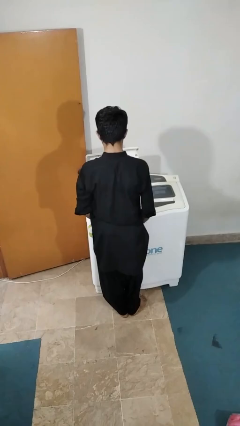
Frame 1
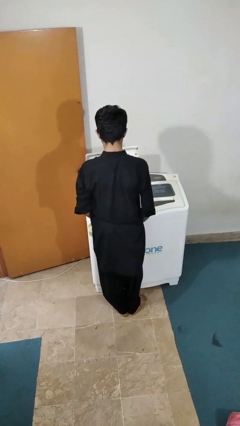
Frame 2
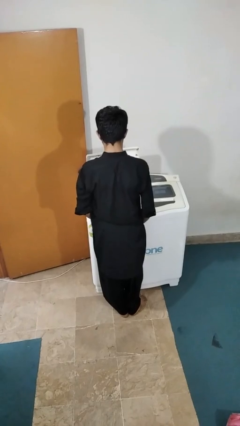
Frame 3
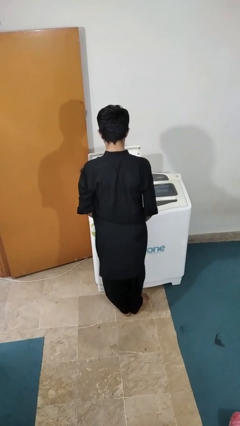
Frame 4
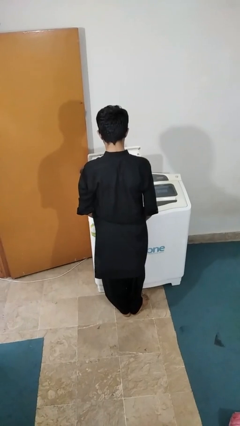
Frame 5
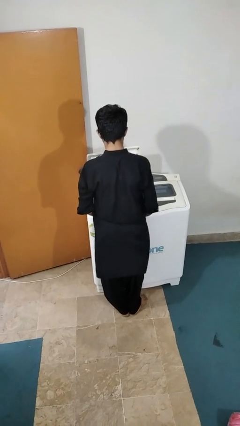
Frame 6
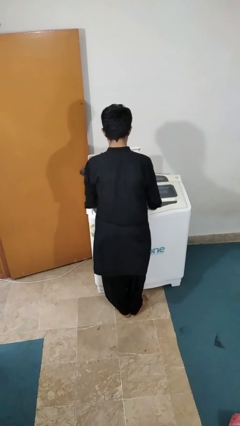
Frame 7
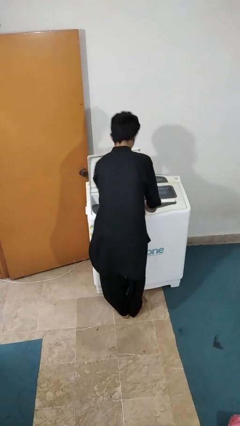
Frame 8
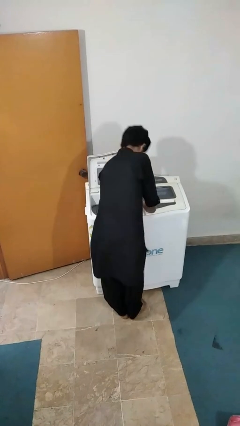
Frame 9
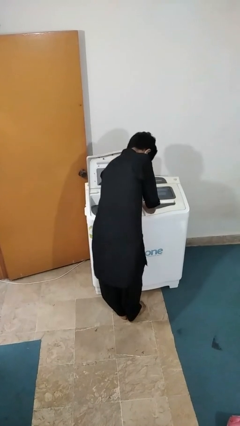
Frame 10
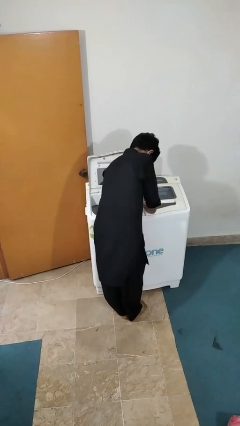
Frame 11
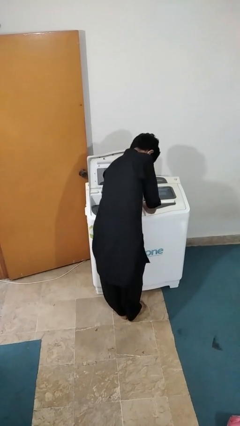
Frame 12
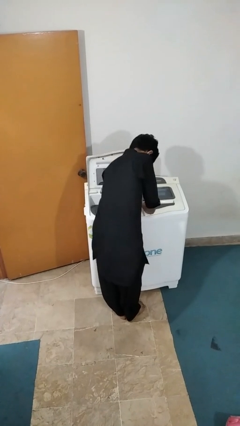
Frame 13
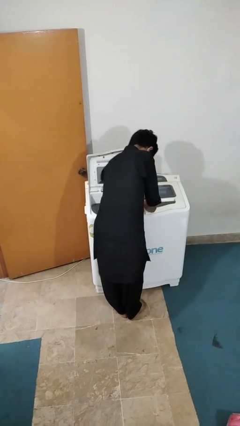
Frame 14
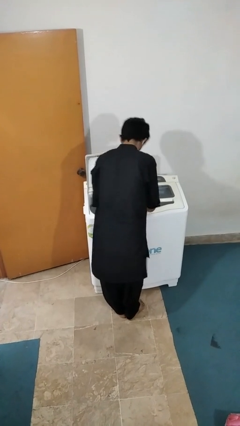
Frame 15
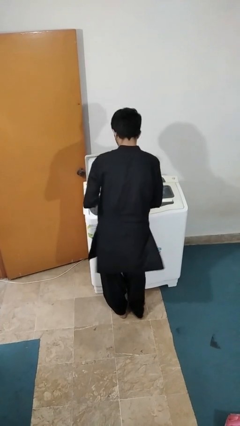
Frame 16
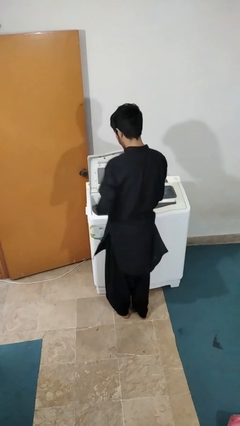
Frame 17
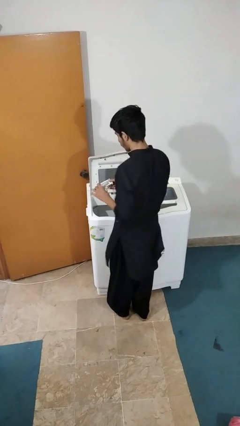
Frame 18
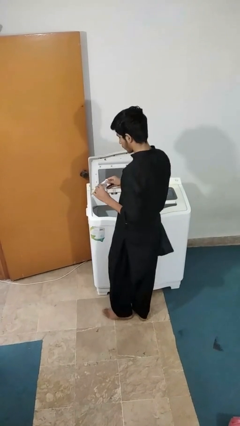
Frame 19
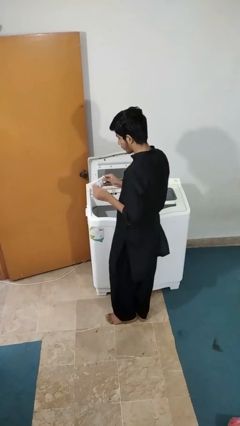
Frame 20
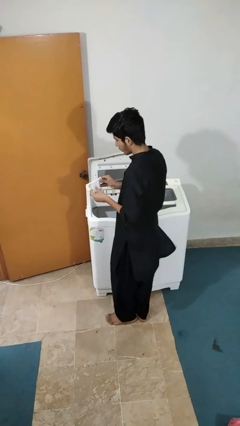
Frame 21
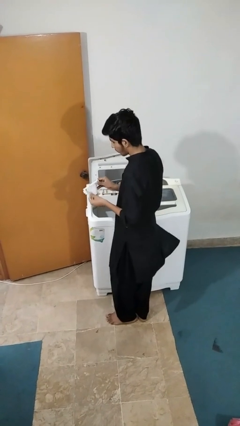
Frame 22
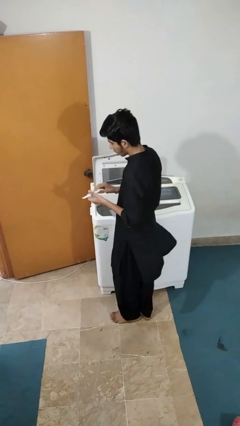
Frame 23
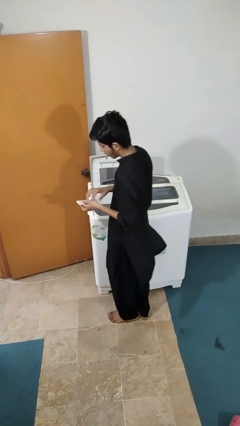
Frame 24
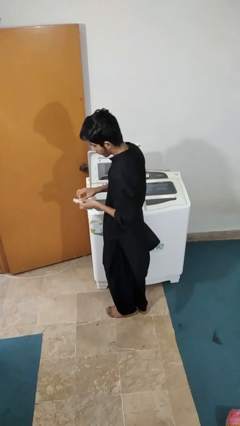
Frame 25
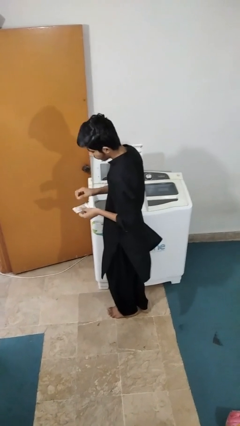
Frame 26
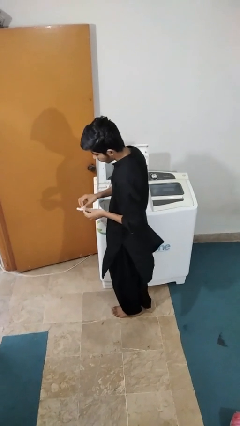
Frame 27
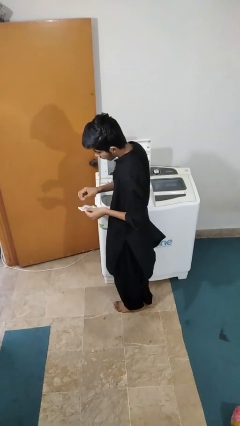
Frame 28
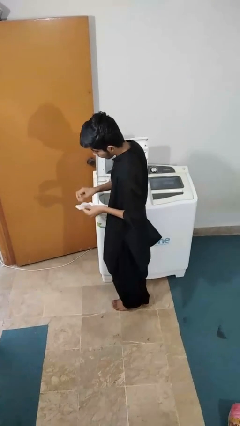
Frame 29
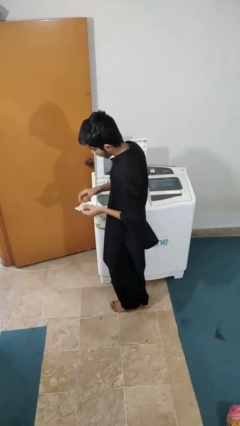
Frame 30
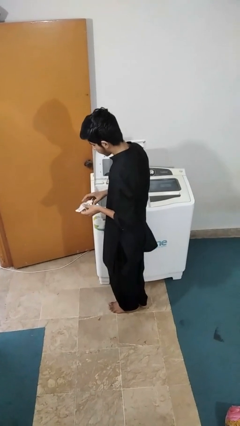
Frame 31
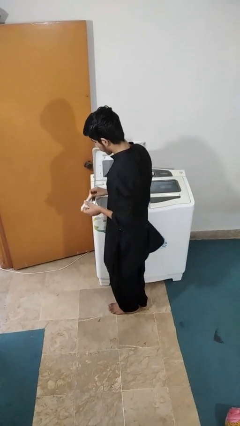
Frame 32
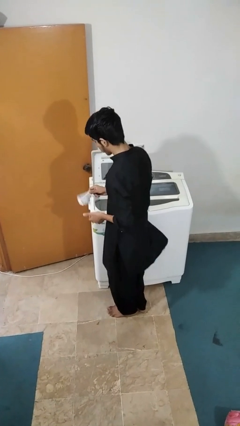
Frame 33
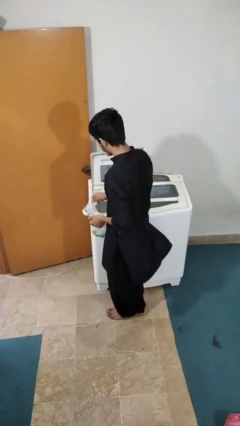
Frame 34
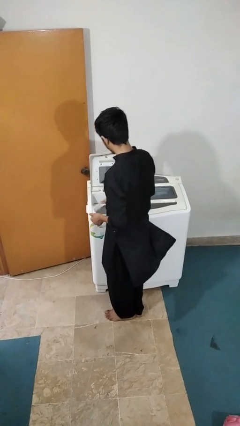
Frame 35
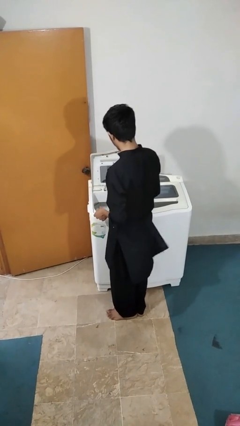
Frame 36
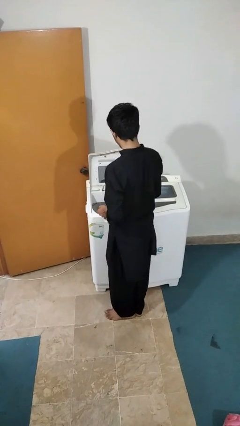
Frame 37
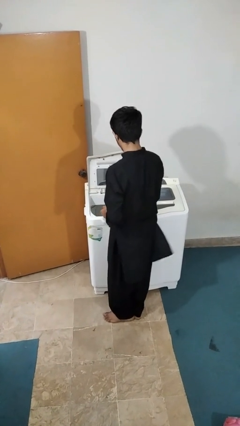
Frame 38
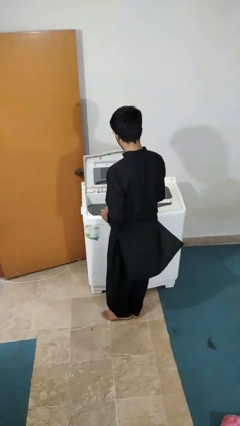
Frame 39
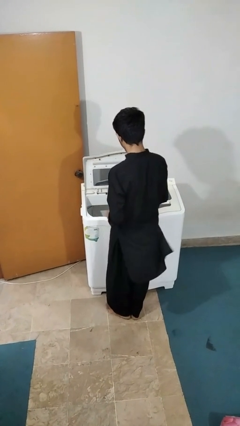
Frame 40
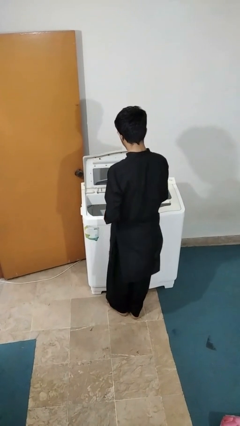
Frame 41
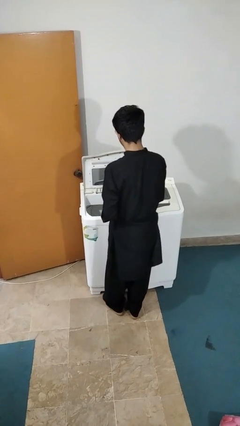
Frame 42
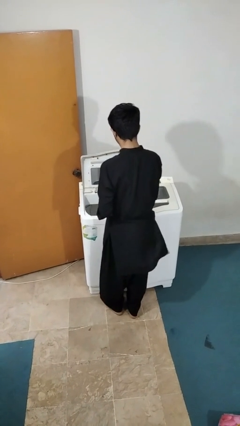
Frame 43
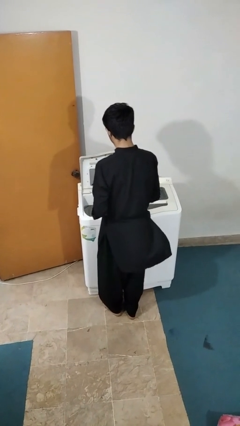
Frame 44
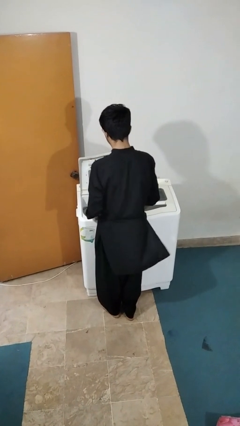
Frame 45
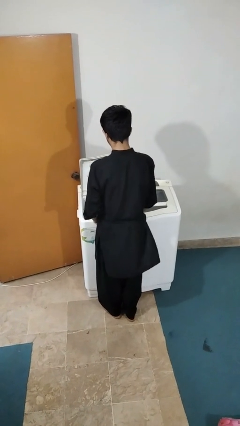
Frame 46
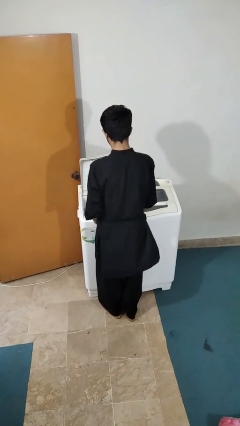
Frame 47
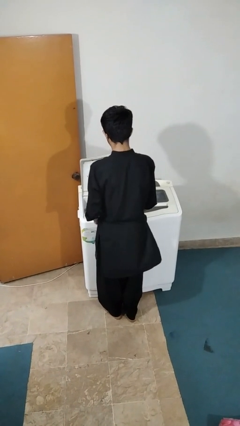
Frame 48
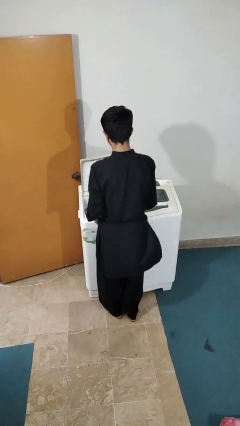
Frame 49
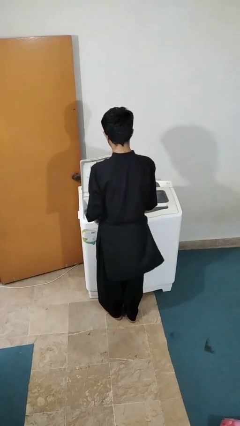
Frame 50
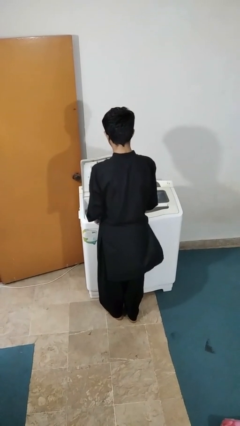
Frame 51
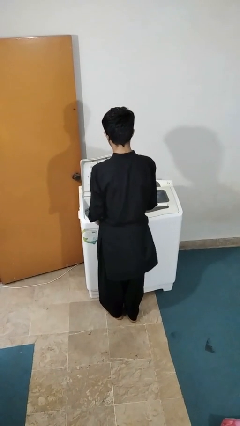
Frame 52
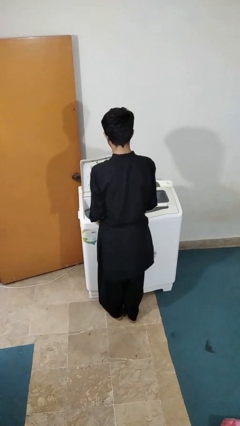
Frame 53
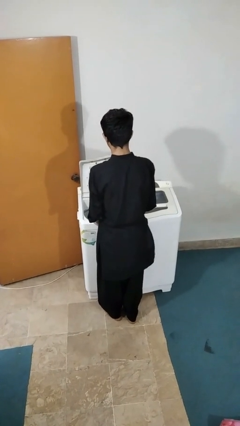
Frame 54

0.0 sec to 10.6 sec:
person cleans dryer lint trap

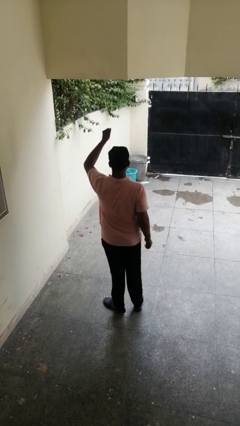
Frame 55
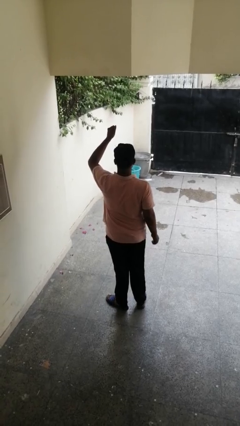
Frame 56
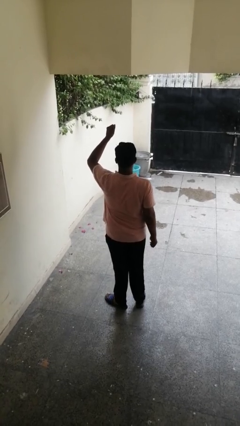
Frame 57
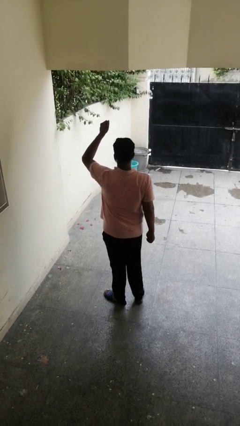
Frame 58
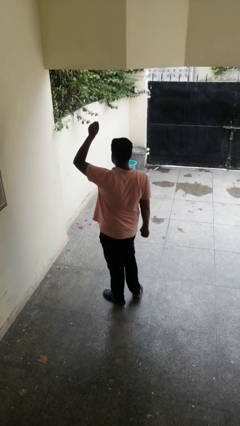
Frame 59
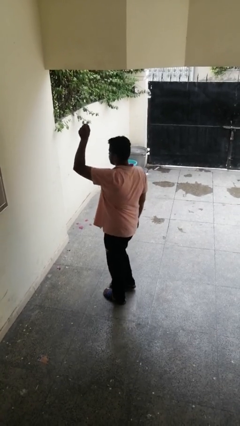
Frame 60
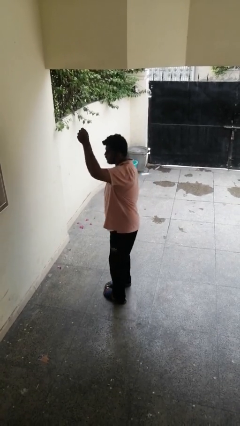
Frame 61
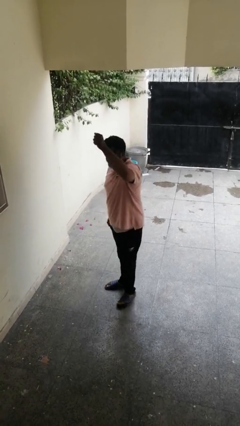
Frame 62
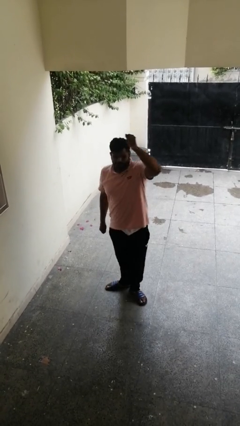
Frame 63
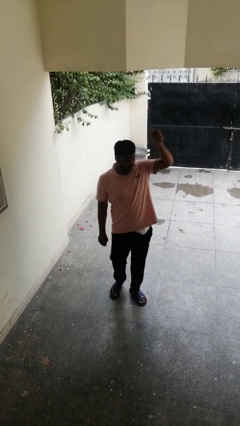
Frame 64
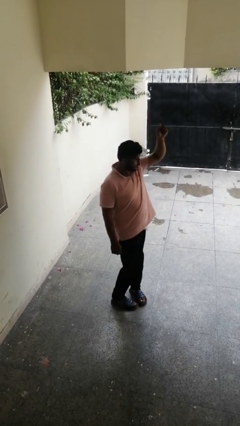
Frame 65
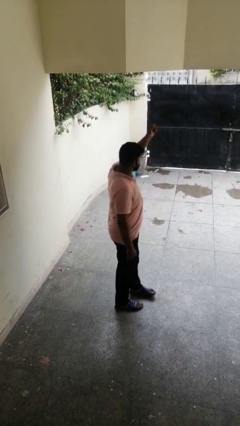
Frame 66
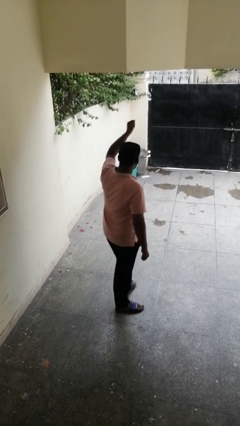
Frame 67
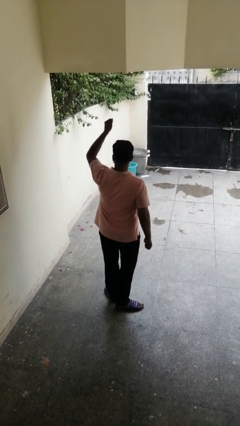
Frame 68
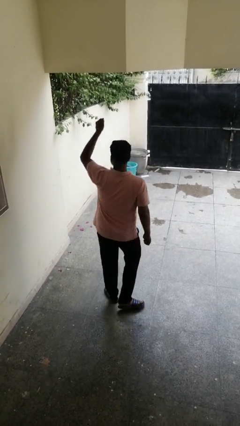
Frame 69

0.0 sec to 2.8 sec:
person twirls

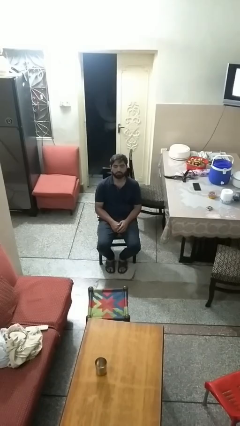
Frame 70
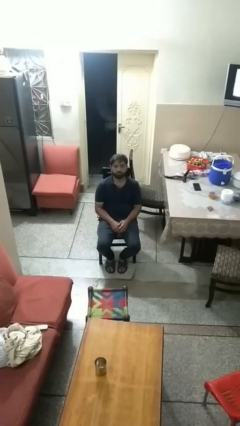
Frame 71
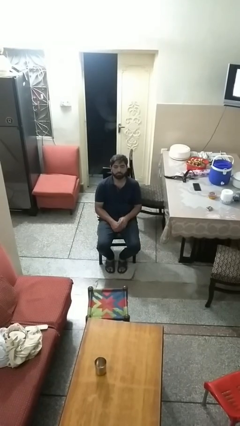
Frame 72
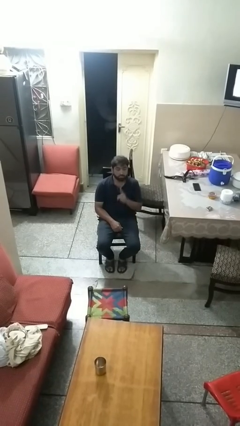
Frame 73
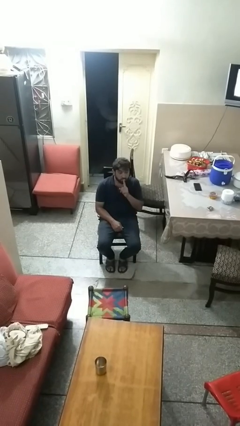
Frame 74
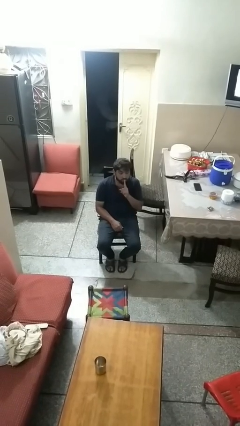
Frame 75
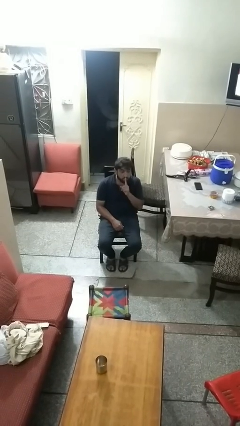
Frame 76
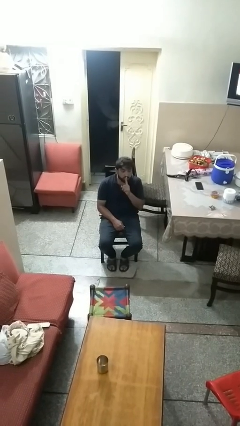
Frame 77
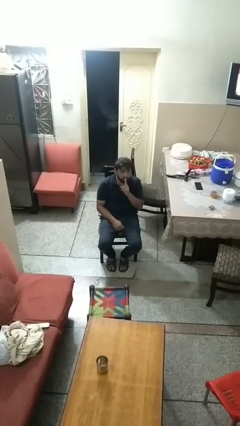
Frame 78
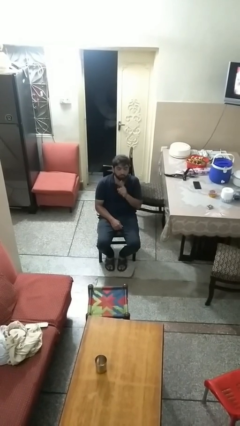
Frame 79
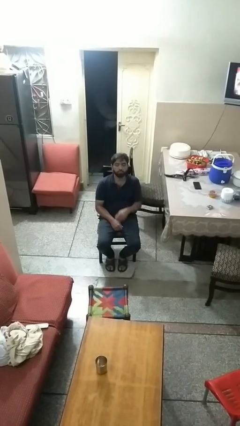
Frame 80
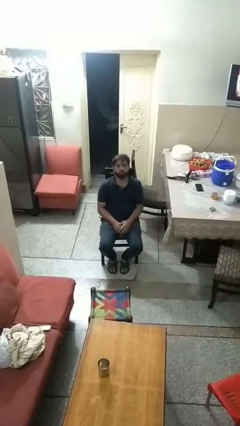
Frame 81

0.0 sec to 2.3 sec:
person gestures be quiet

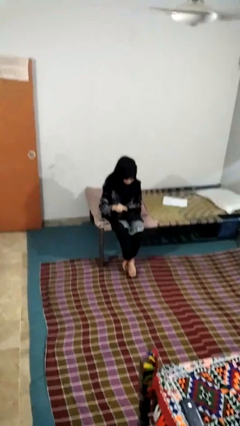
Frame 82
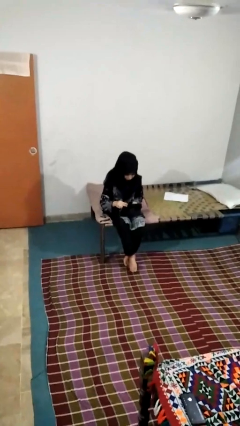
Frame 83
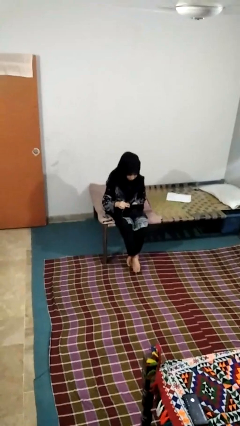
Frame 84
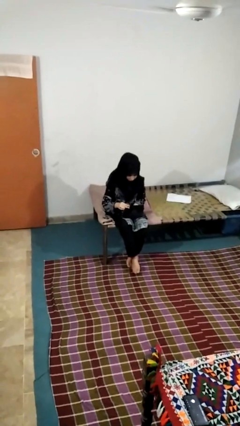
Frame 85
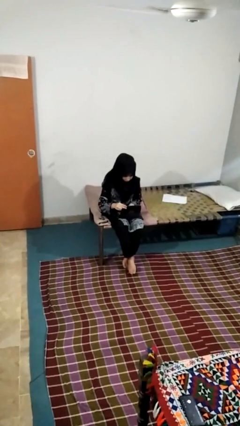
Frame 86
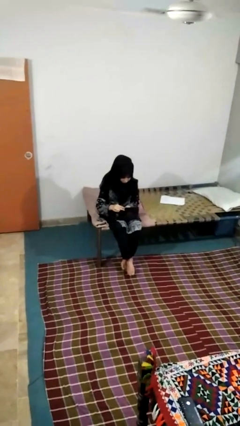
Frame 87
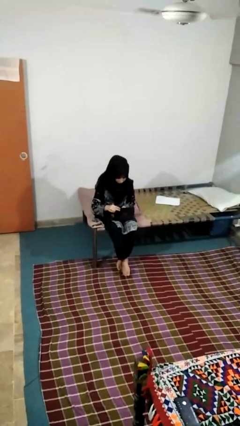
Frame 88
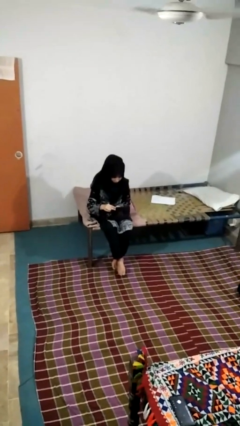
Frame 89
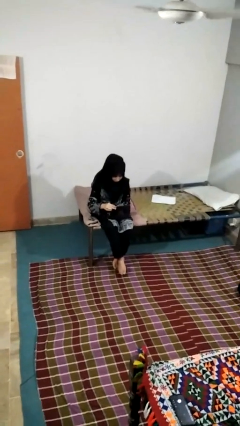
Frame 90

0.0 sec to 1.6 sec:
person searches jewelry box

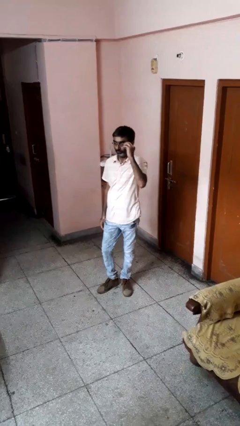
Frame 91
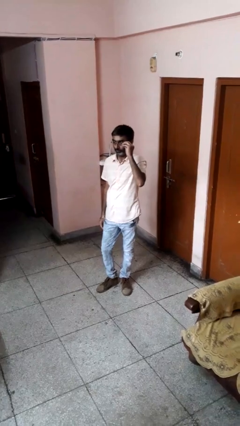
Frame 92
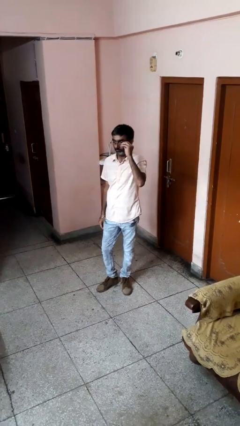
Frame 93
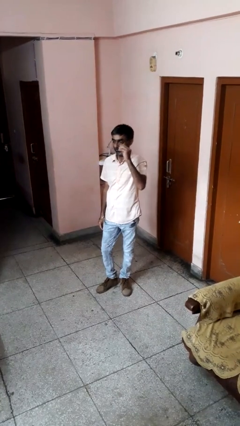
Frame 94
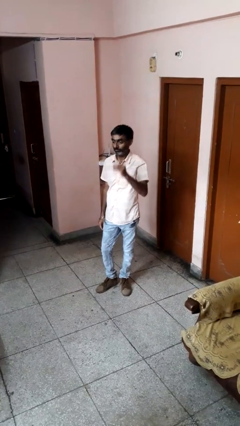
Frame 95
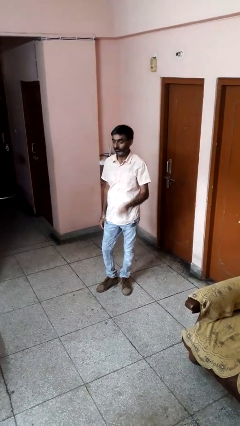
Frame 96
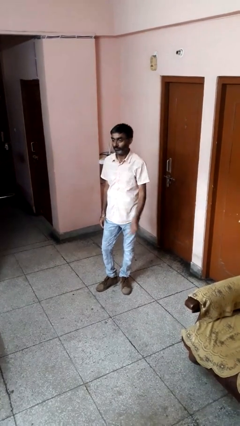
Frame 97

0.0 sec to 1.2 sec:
person takes off glasses
